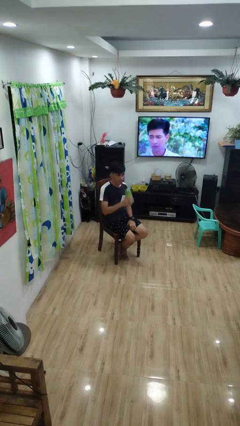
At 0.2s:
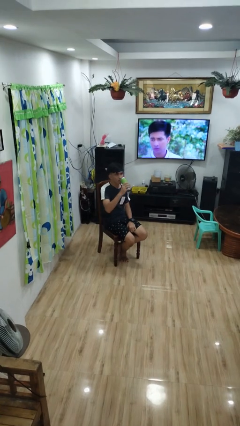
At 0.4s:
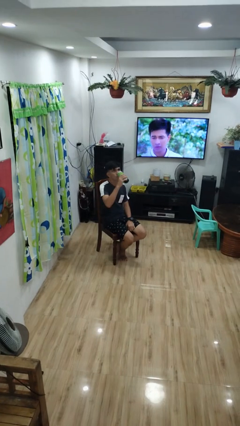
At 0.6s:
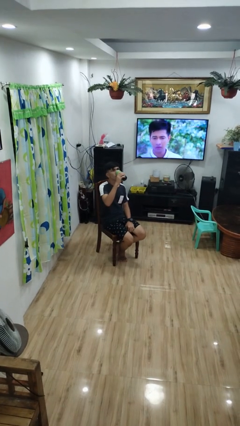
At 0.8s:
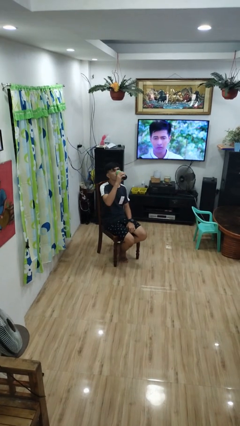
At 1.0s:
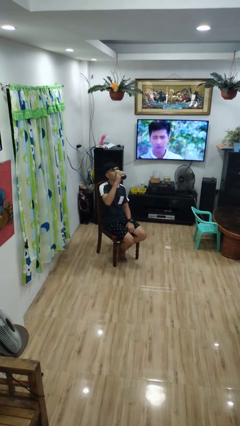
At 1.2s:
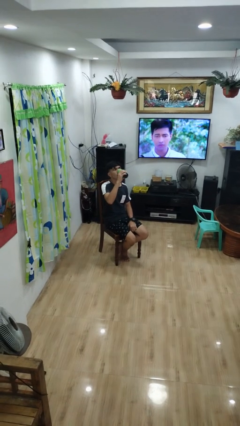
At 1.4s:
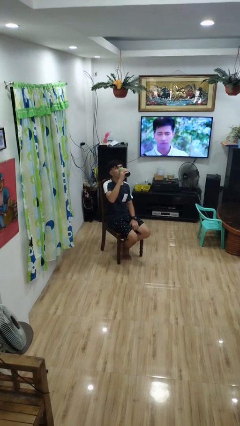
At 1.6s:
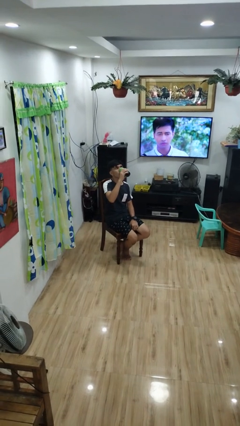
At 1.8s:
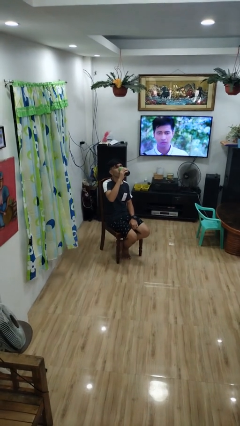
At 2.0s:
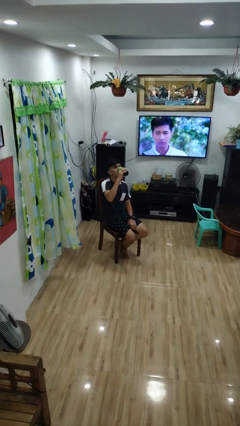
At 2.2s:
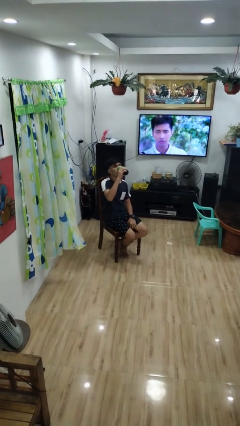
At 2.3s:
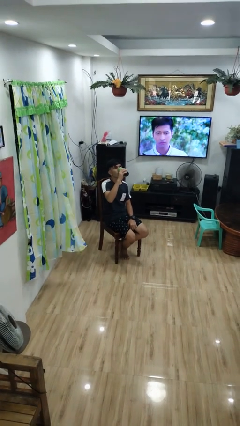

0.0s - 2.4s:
person drinks from bottle

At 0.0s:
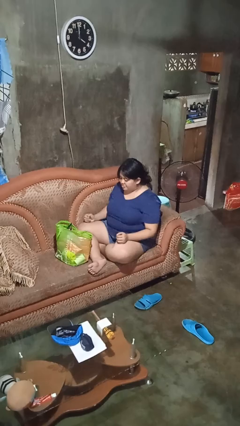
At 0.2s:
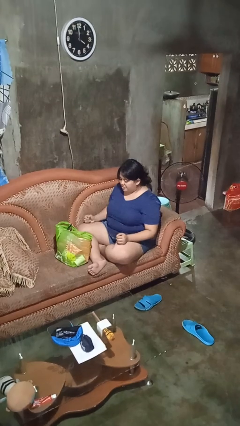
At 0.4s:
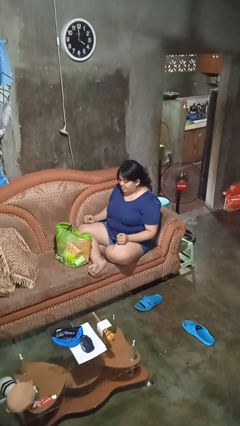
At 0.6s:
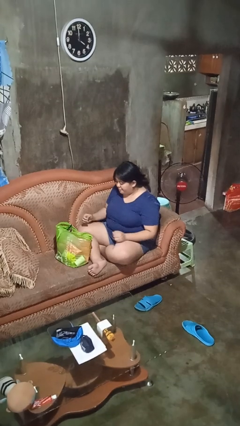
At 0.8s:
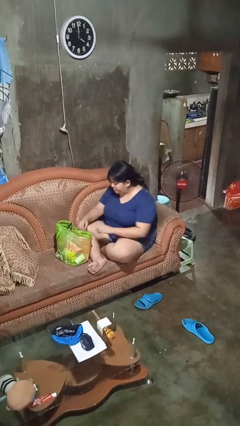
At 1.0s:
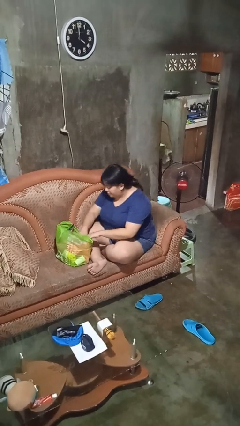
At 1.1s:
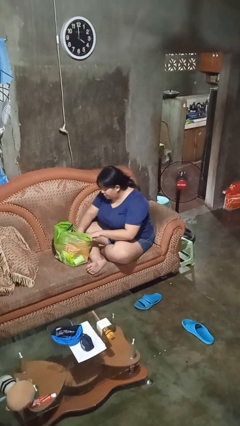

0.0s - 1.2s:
person searches in bag

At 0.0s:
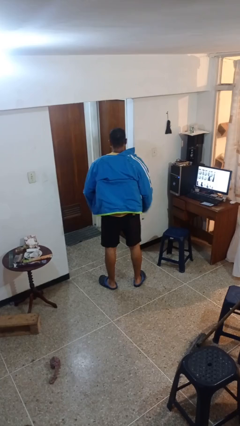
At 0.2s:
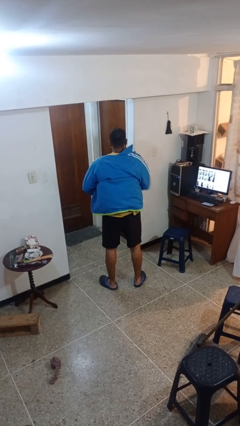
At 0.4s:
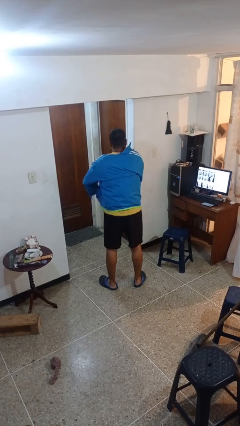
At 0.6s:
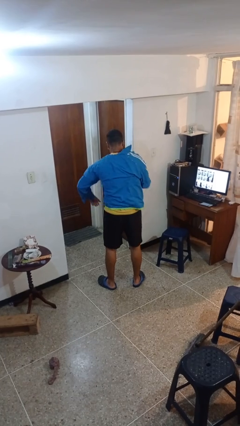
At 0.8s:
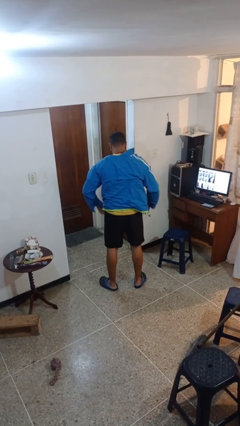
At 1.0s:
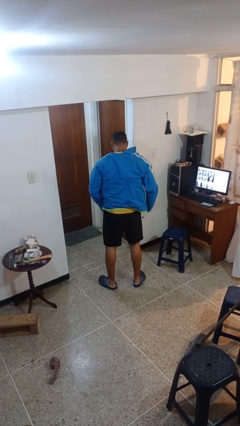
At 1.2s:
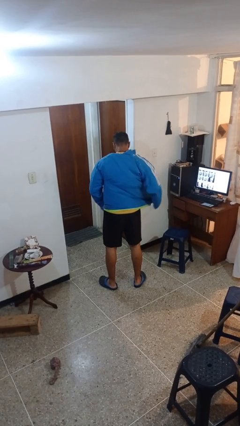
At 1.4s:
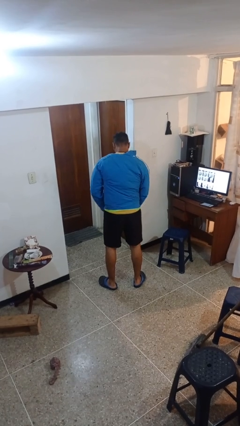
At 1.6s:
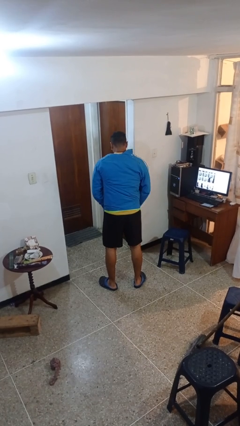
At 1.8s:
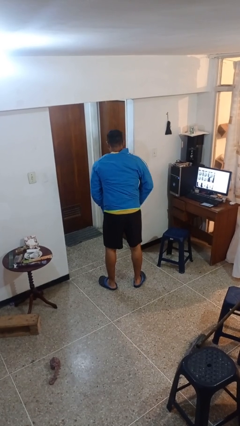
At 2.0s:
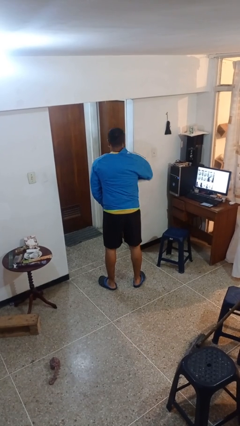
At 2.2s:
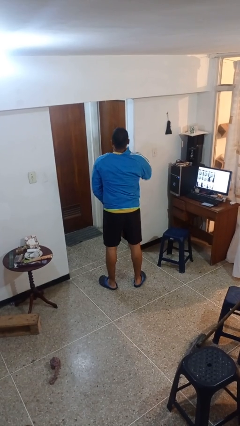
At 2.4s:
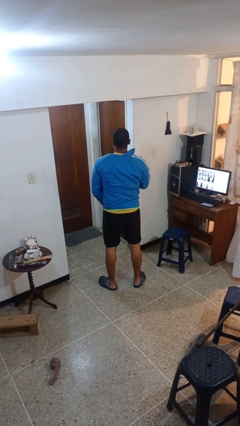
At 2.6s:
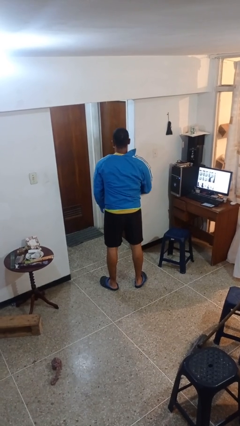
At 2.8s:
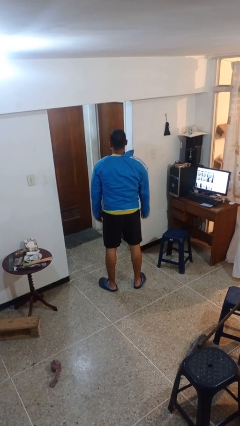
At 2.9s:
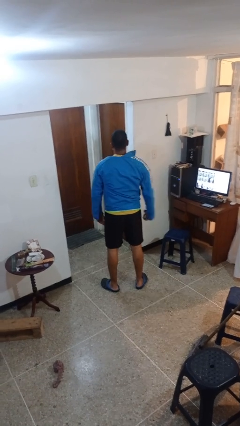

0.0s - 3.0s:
person zips up jacket

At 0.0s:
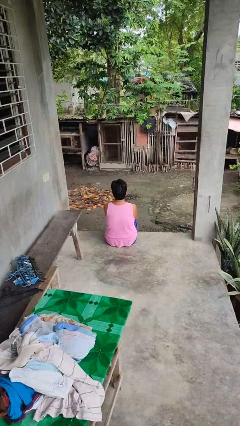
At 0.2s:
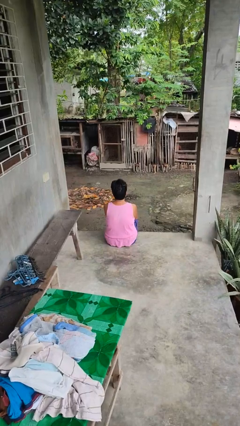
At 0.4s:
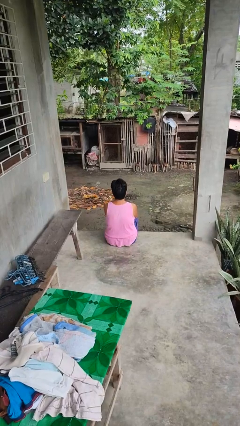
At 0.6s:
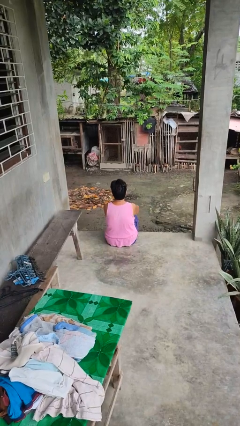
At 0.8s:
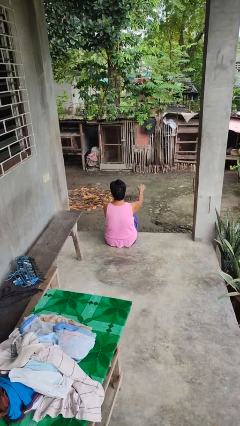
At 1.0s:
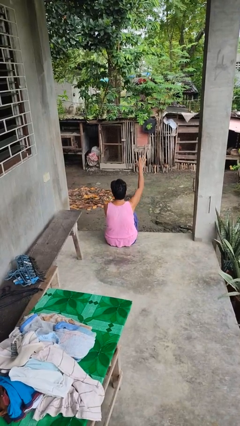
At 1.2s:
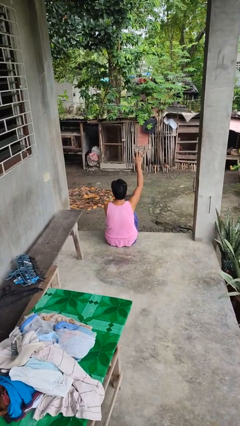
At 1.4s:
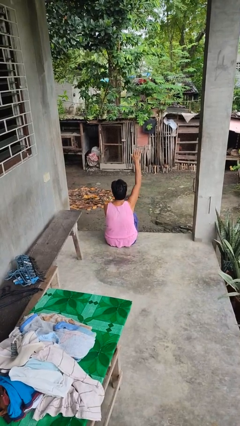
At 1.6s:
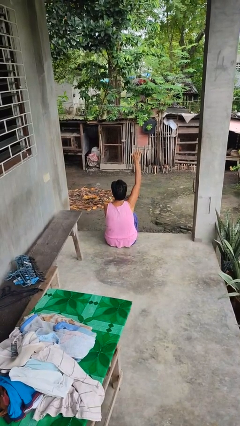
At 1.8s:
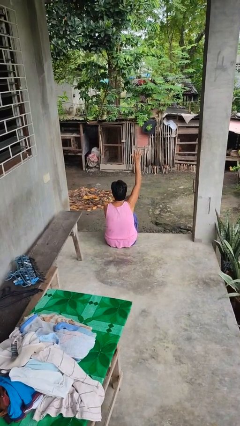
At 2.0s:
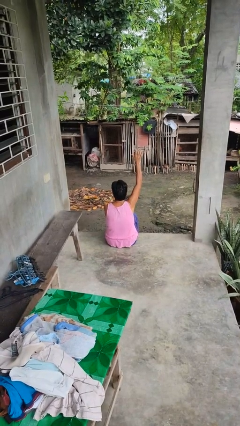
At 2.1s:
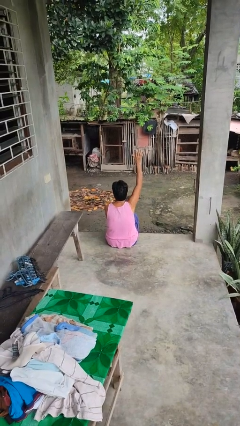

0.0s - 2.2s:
person gestures raise hand

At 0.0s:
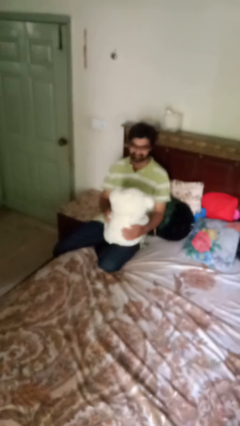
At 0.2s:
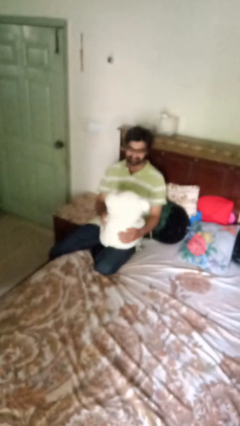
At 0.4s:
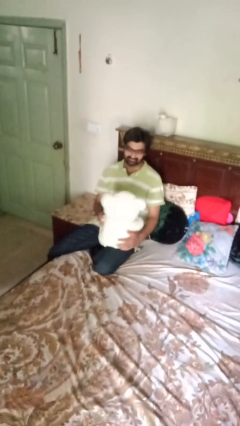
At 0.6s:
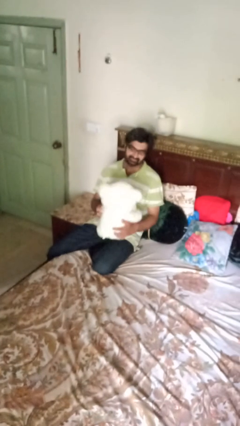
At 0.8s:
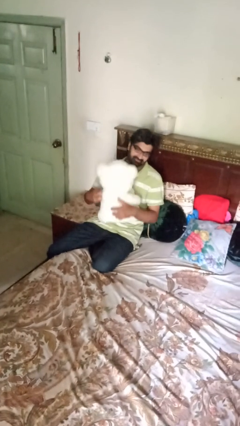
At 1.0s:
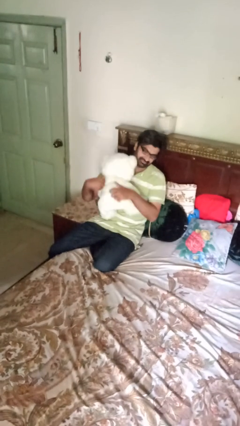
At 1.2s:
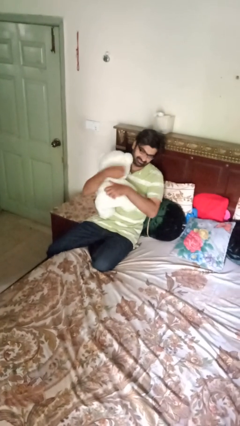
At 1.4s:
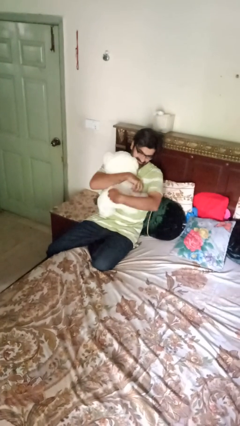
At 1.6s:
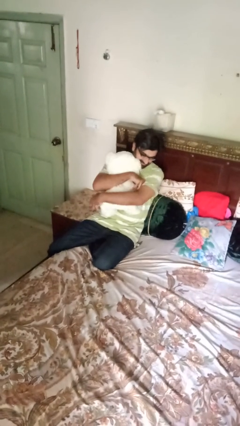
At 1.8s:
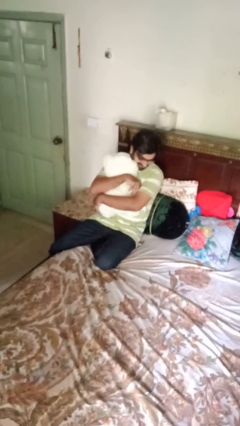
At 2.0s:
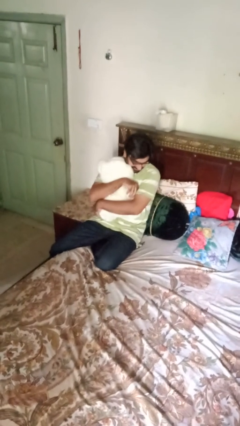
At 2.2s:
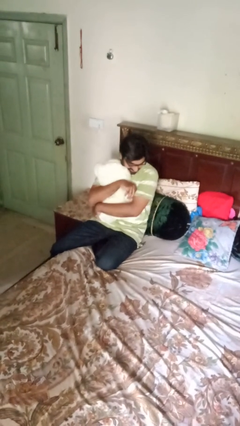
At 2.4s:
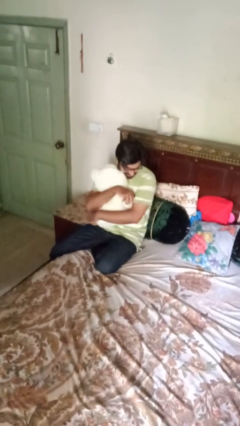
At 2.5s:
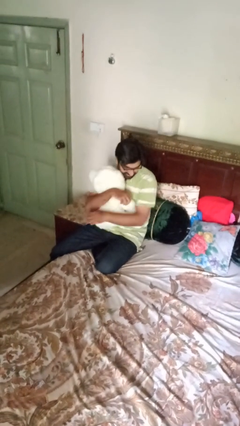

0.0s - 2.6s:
person hugs stuffed animal

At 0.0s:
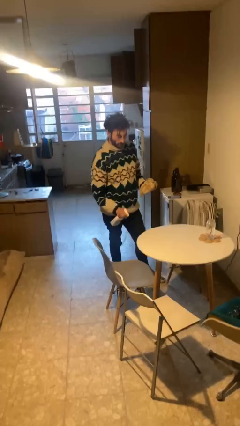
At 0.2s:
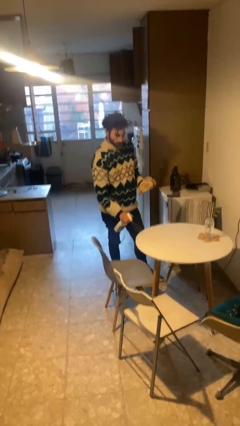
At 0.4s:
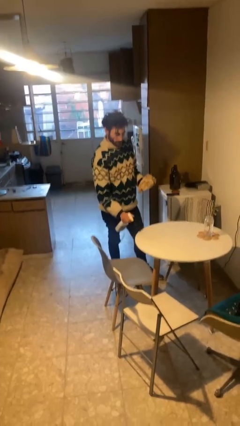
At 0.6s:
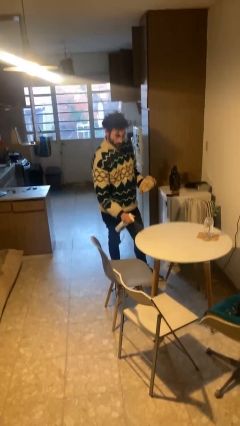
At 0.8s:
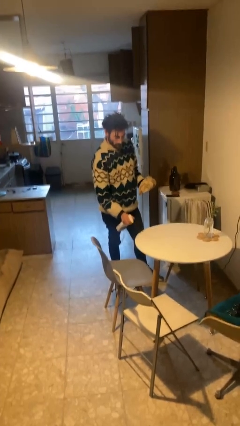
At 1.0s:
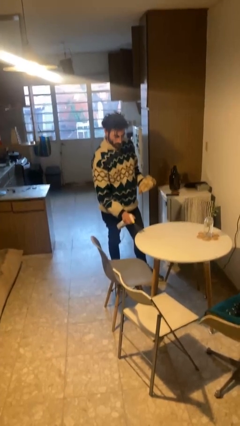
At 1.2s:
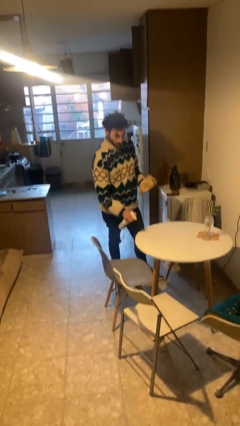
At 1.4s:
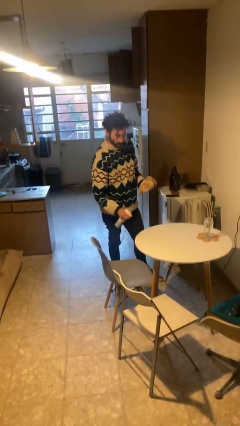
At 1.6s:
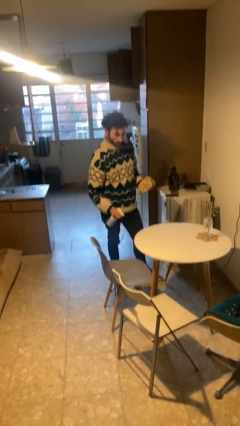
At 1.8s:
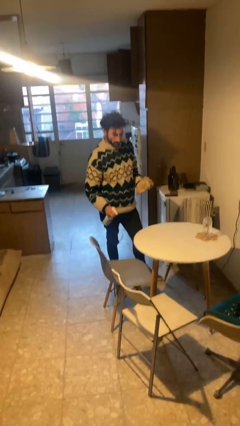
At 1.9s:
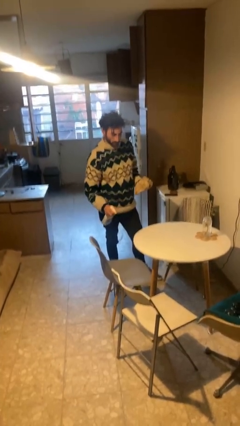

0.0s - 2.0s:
person sprays from bottle

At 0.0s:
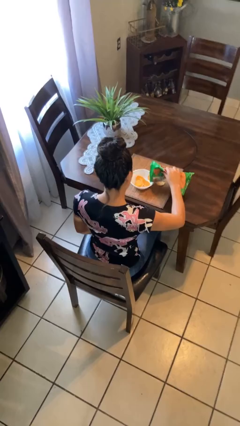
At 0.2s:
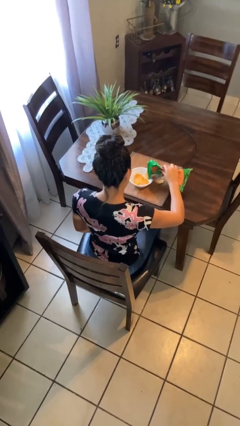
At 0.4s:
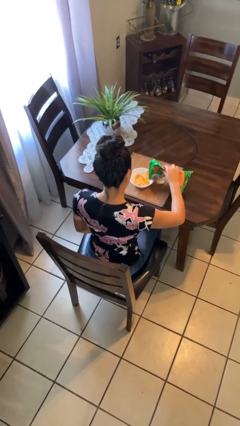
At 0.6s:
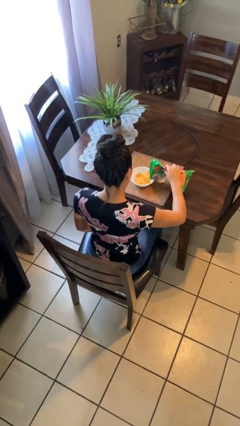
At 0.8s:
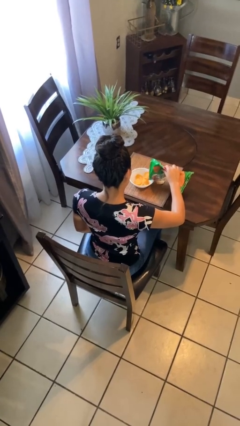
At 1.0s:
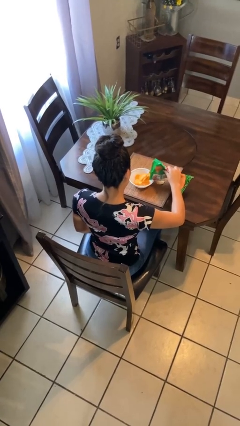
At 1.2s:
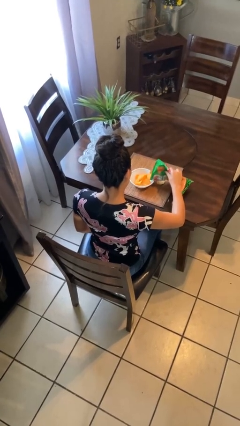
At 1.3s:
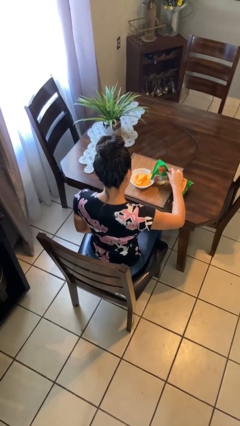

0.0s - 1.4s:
person pours into bowl

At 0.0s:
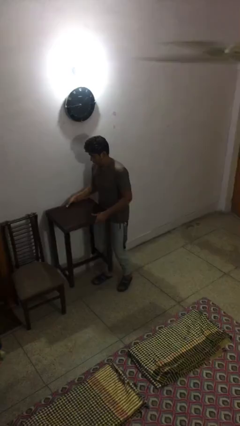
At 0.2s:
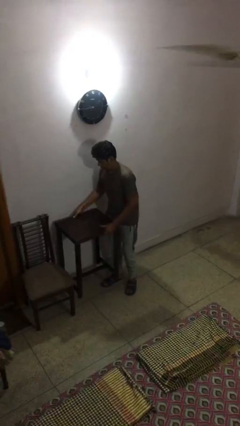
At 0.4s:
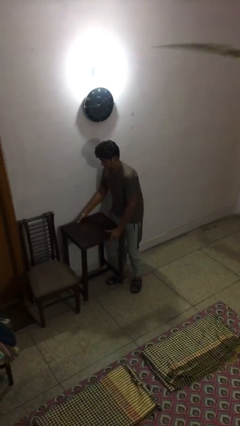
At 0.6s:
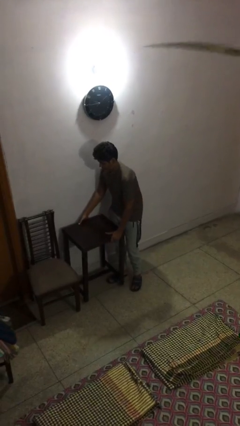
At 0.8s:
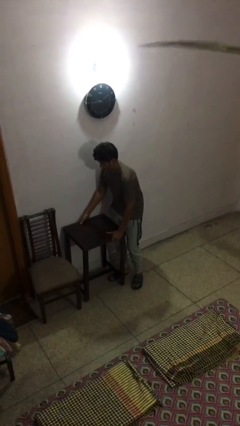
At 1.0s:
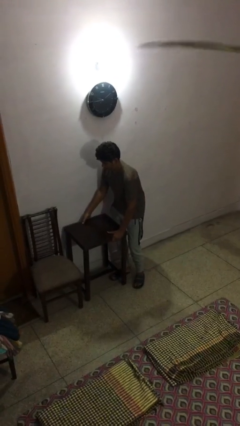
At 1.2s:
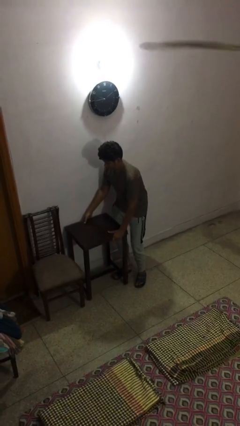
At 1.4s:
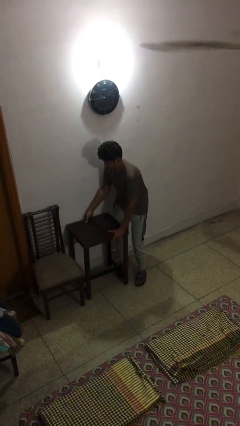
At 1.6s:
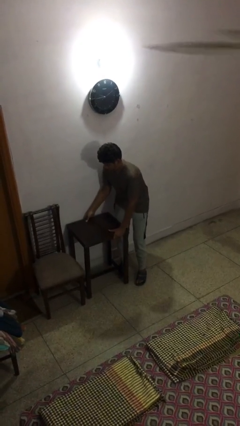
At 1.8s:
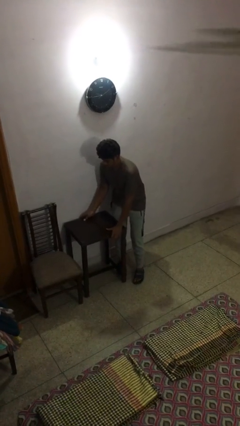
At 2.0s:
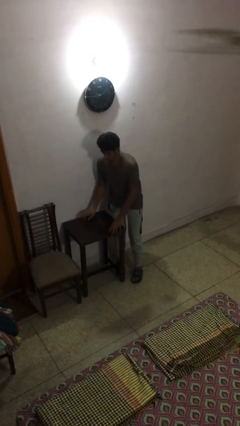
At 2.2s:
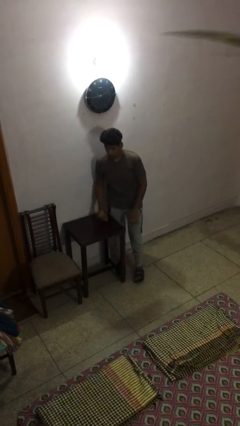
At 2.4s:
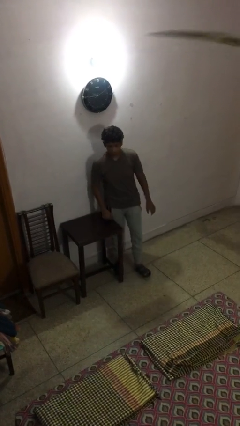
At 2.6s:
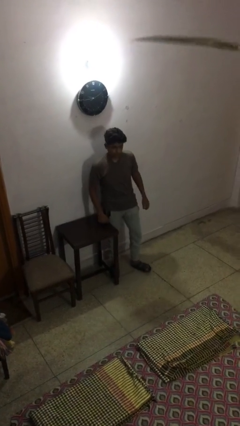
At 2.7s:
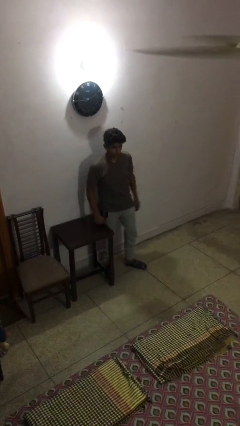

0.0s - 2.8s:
person puts down object on floor
